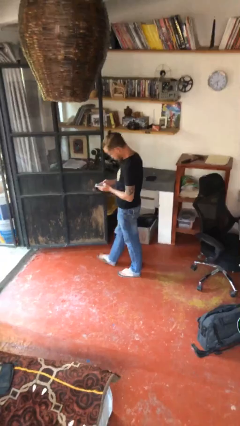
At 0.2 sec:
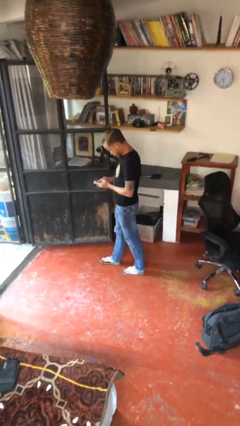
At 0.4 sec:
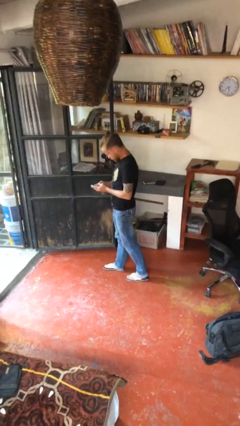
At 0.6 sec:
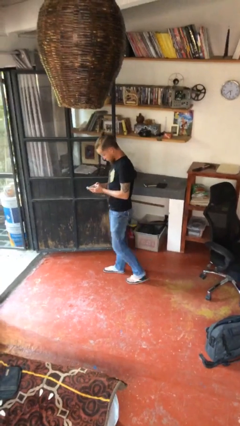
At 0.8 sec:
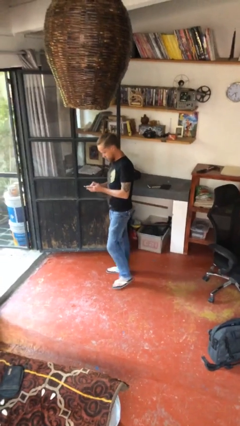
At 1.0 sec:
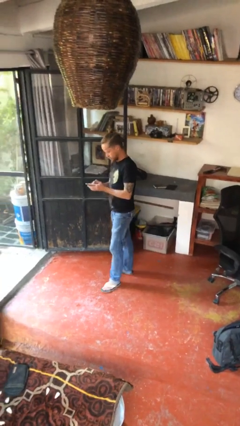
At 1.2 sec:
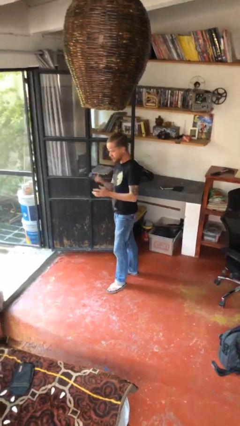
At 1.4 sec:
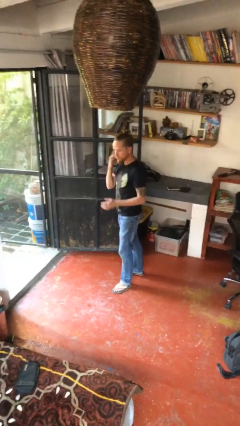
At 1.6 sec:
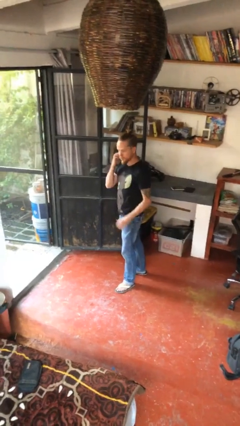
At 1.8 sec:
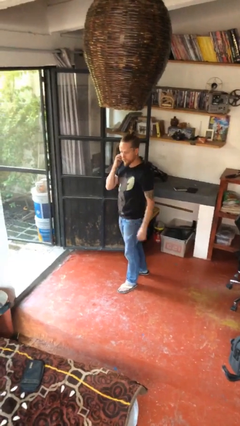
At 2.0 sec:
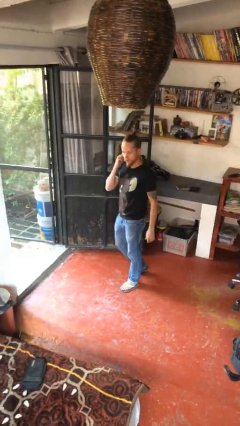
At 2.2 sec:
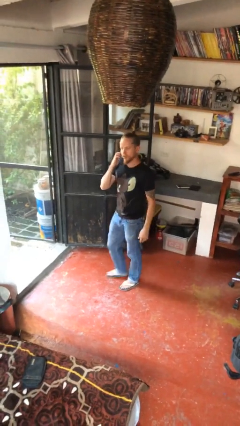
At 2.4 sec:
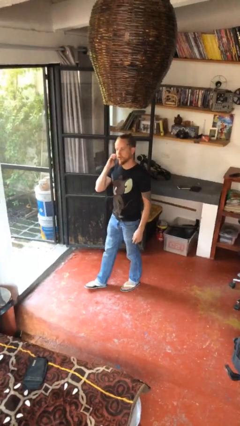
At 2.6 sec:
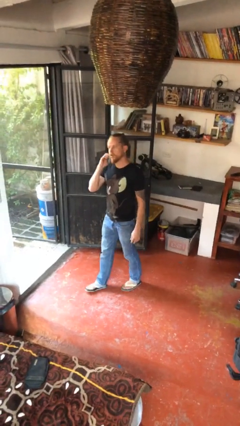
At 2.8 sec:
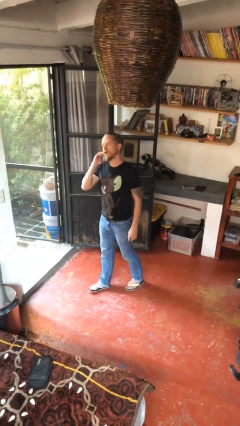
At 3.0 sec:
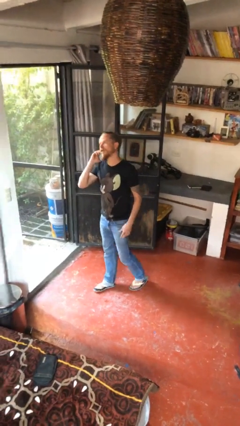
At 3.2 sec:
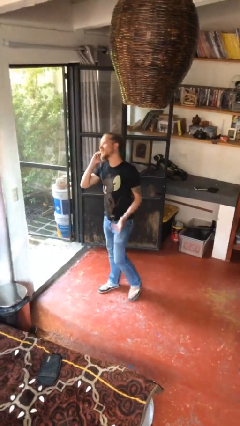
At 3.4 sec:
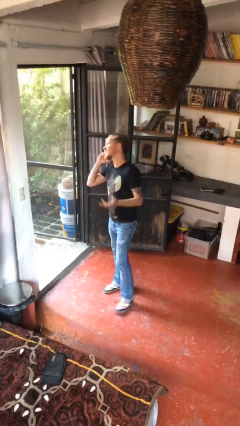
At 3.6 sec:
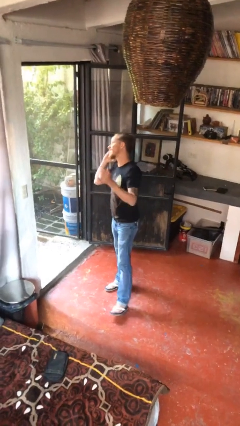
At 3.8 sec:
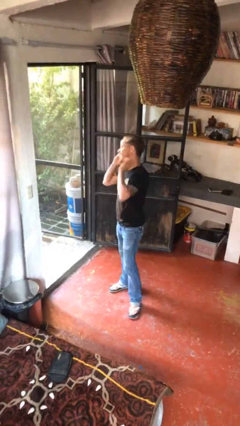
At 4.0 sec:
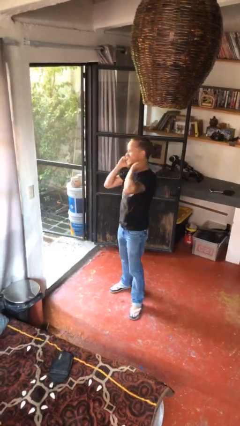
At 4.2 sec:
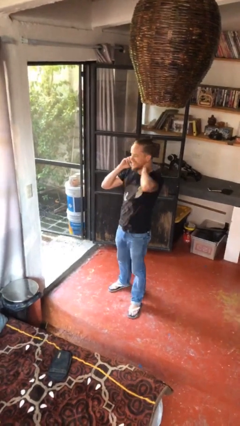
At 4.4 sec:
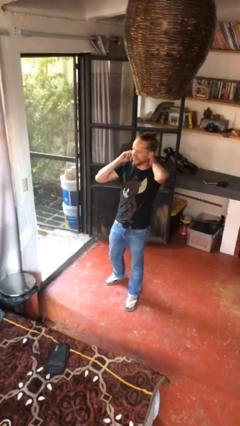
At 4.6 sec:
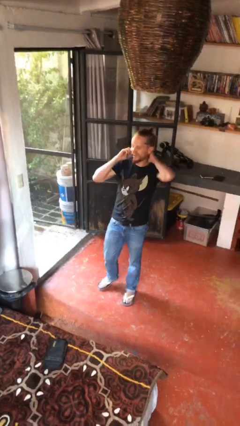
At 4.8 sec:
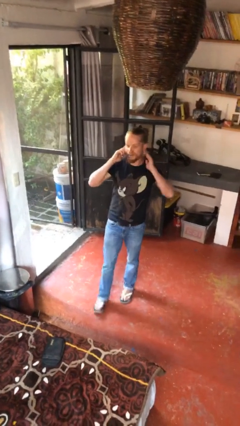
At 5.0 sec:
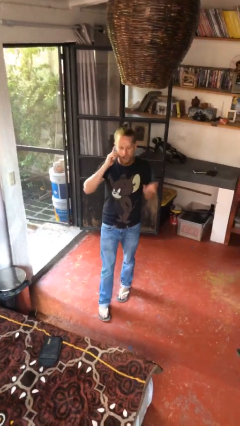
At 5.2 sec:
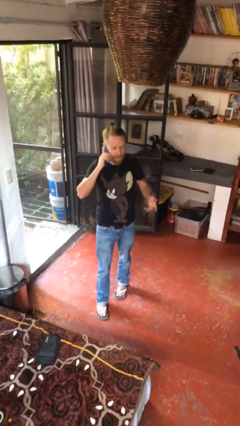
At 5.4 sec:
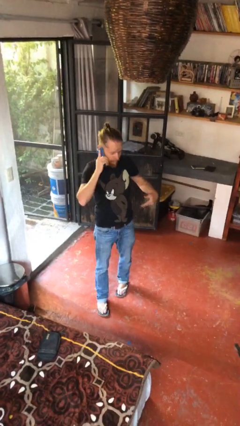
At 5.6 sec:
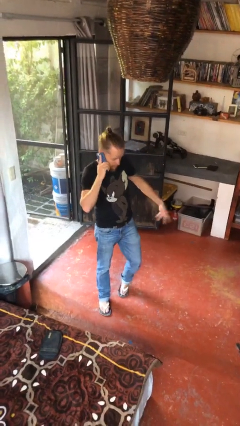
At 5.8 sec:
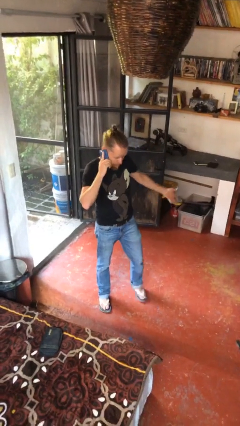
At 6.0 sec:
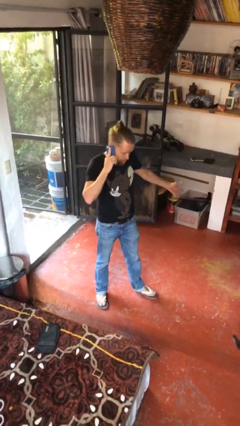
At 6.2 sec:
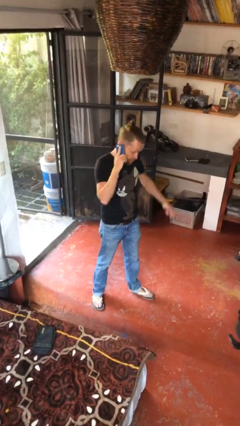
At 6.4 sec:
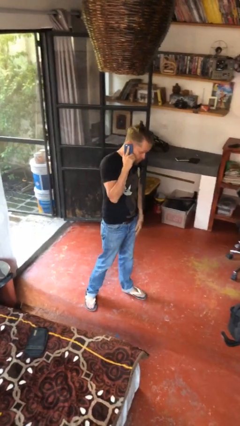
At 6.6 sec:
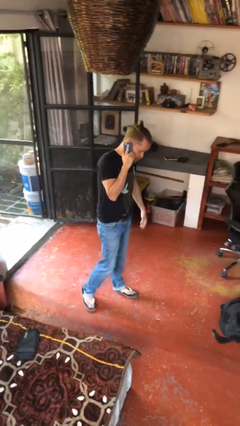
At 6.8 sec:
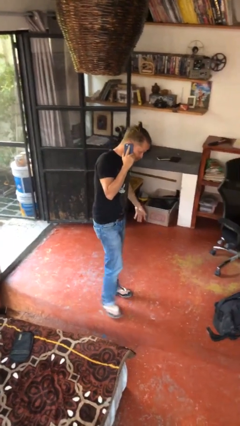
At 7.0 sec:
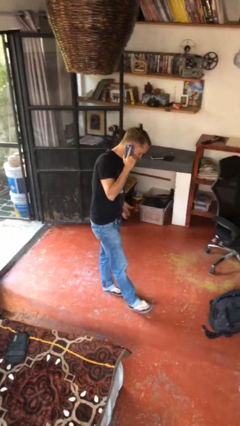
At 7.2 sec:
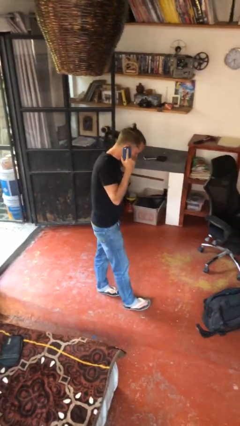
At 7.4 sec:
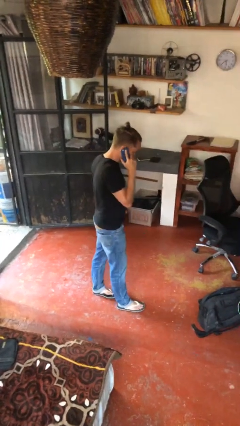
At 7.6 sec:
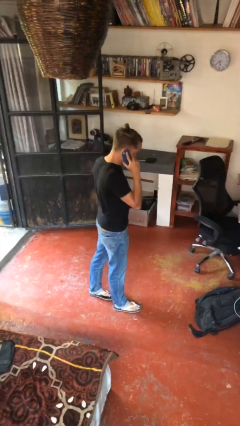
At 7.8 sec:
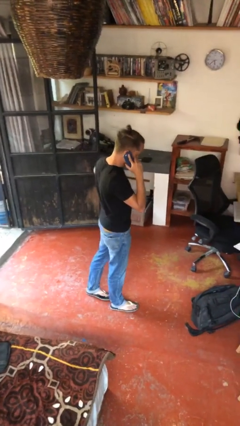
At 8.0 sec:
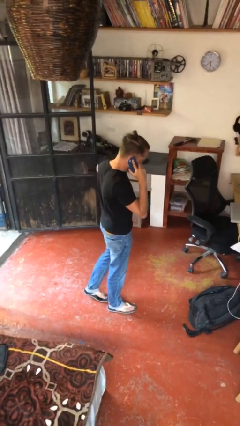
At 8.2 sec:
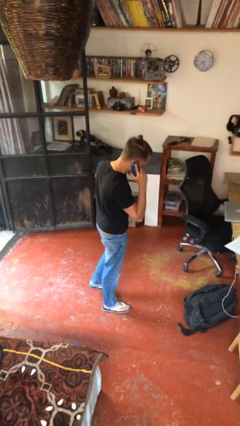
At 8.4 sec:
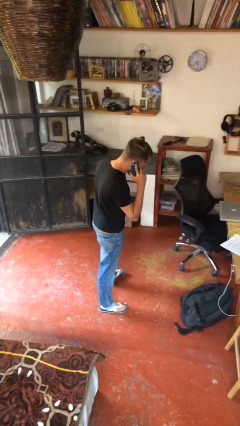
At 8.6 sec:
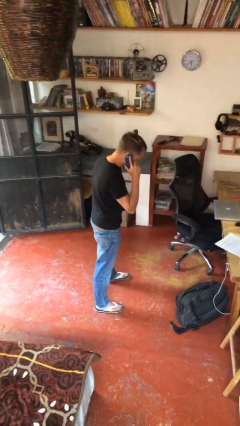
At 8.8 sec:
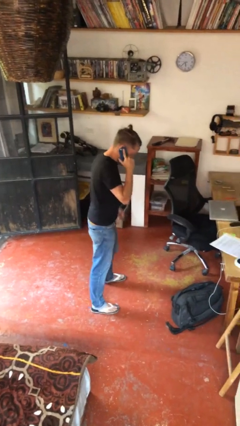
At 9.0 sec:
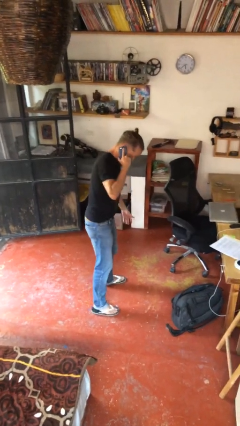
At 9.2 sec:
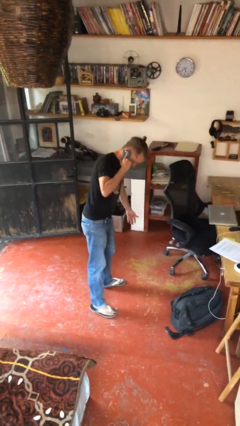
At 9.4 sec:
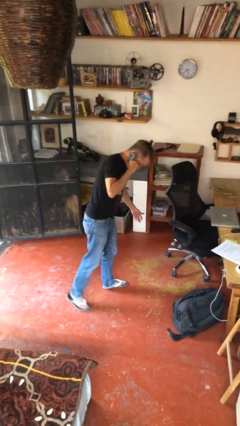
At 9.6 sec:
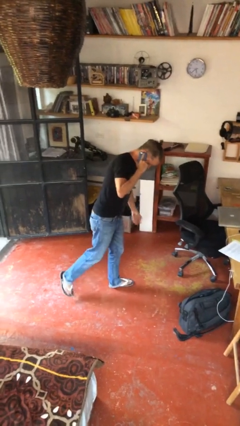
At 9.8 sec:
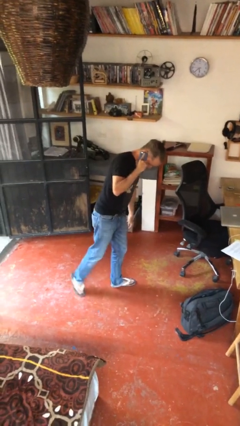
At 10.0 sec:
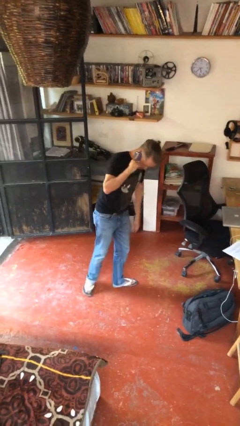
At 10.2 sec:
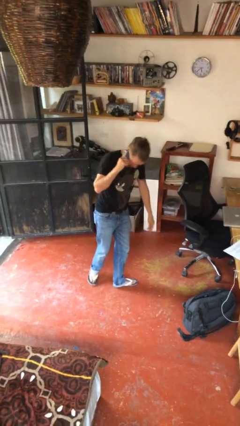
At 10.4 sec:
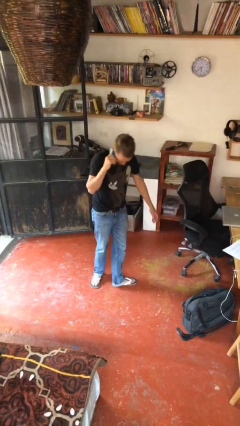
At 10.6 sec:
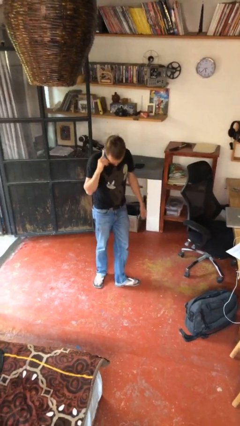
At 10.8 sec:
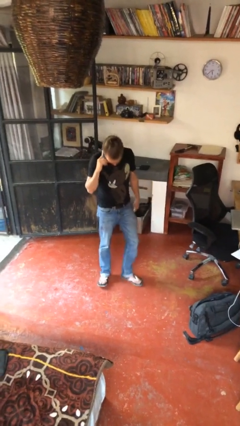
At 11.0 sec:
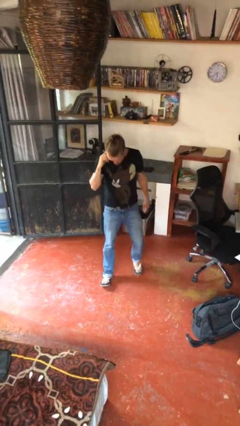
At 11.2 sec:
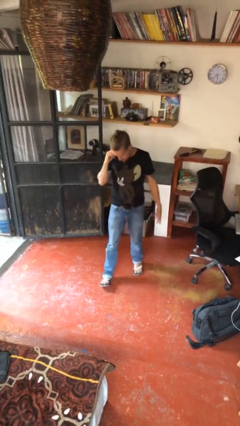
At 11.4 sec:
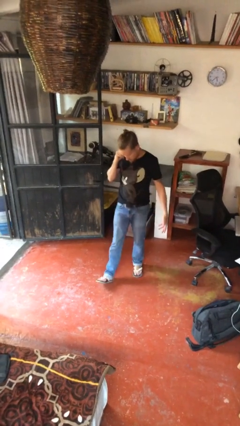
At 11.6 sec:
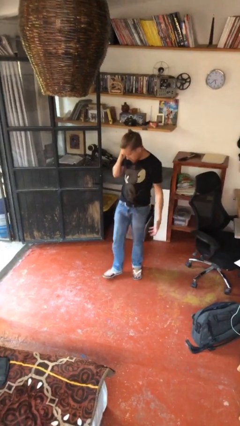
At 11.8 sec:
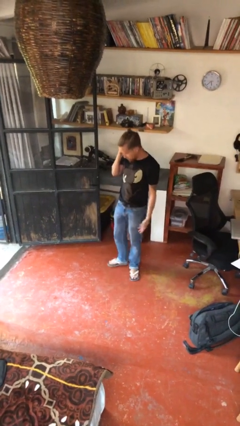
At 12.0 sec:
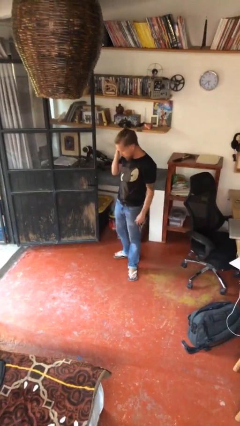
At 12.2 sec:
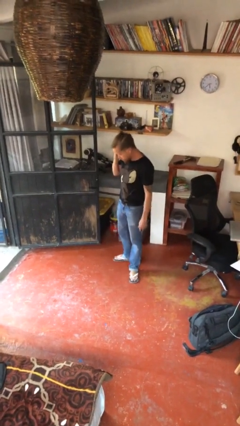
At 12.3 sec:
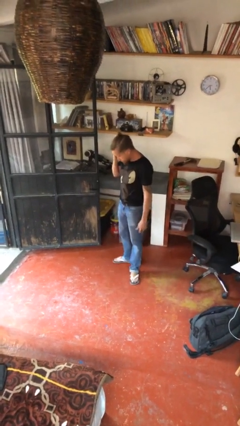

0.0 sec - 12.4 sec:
person talks on phone

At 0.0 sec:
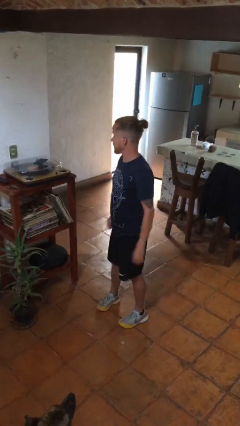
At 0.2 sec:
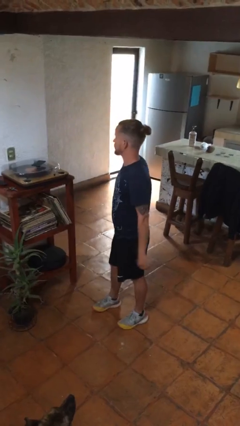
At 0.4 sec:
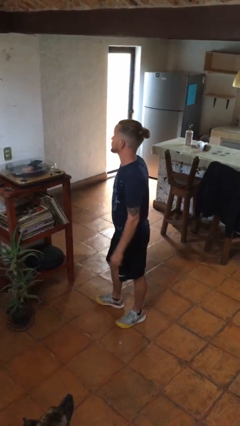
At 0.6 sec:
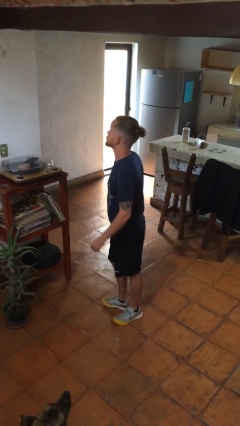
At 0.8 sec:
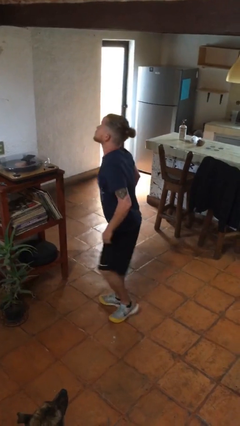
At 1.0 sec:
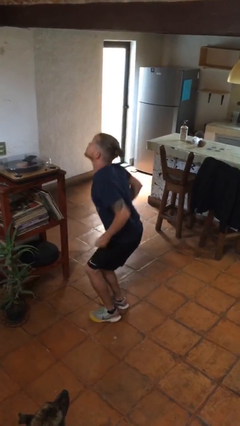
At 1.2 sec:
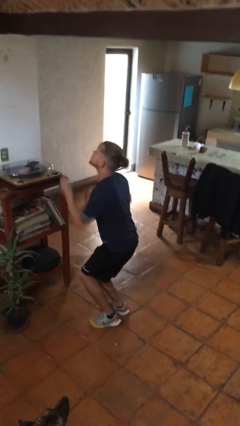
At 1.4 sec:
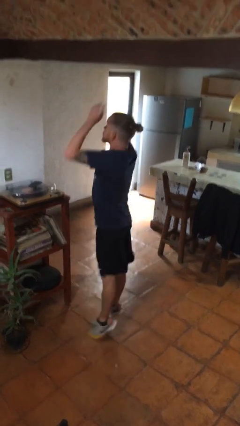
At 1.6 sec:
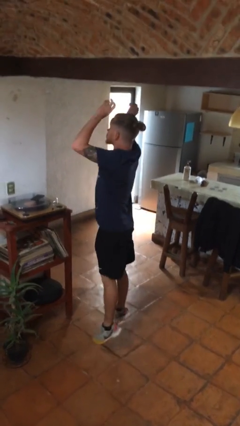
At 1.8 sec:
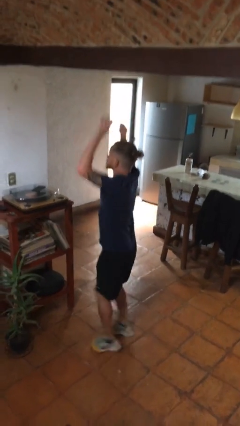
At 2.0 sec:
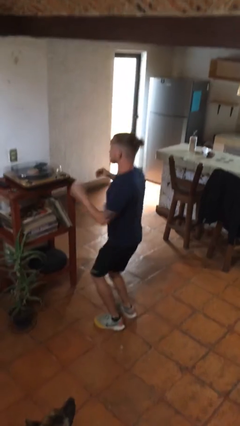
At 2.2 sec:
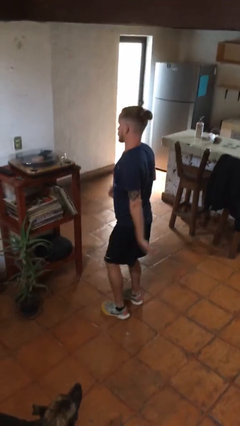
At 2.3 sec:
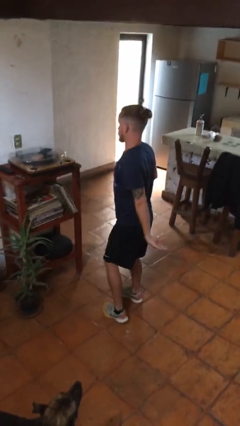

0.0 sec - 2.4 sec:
person jumps

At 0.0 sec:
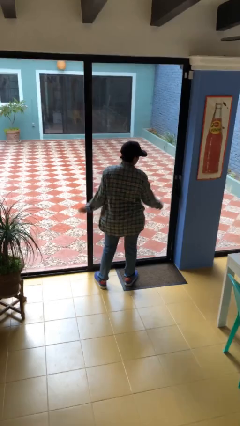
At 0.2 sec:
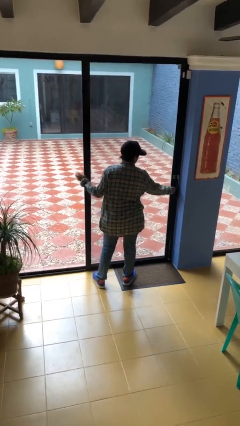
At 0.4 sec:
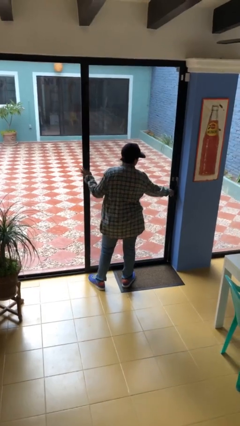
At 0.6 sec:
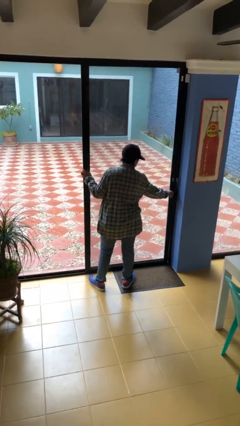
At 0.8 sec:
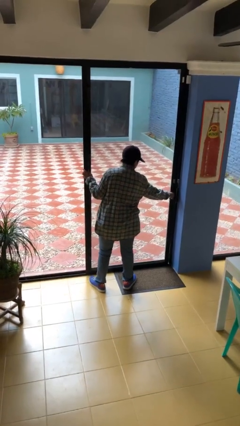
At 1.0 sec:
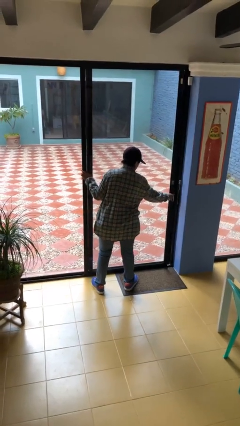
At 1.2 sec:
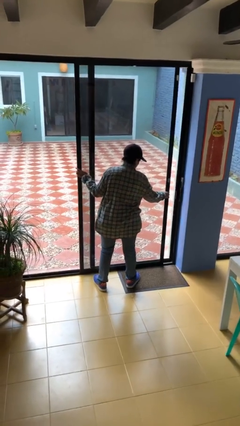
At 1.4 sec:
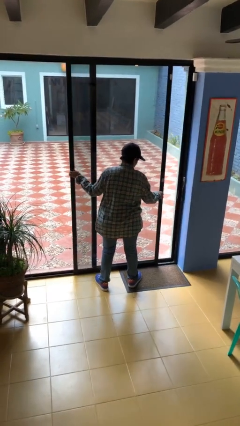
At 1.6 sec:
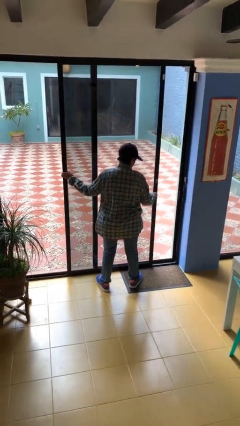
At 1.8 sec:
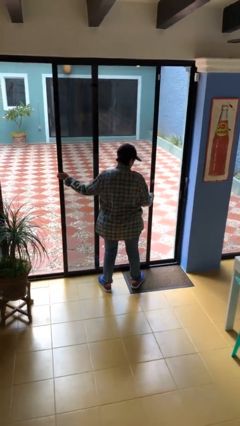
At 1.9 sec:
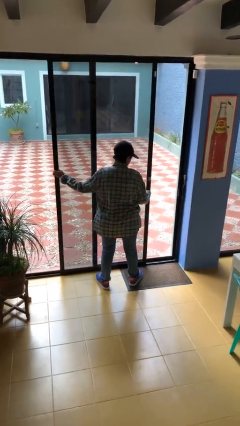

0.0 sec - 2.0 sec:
person opens sliding door

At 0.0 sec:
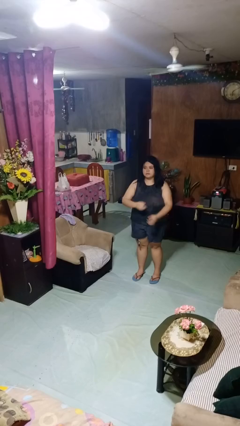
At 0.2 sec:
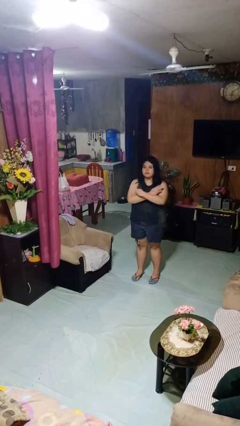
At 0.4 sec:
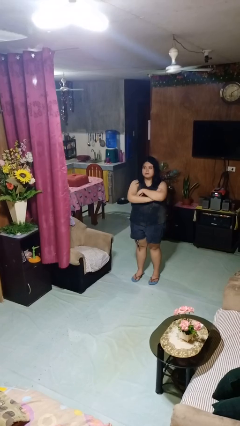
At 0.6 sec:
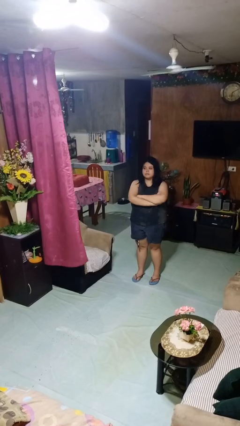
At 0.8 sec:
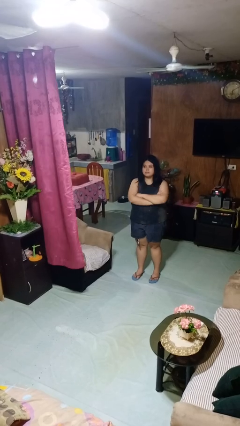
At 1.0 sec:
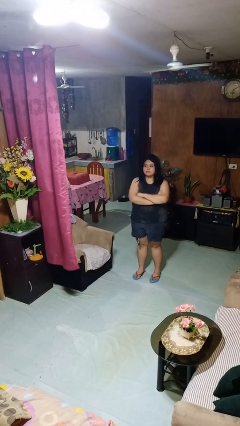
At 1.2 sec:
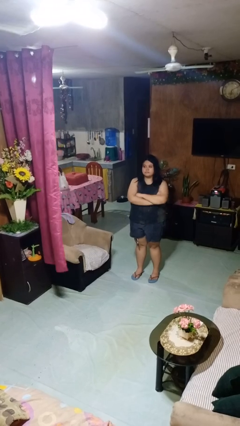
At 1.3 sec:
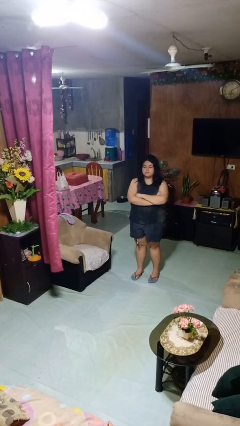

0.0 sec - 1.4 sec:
person crosses arms
